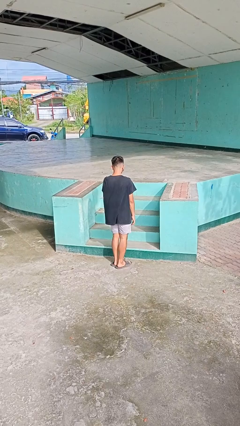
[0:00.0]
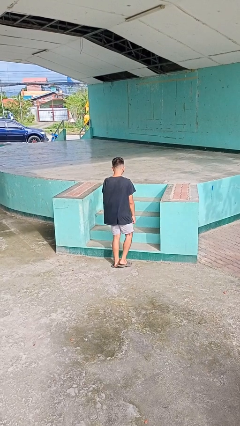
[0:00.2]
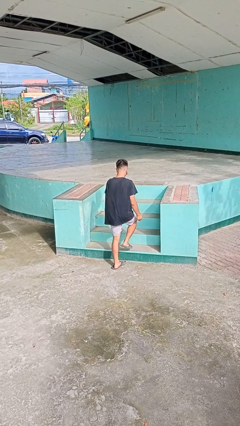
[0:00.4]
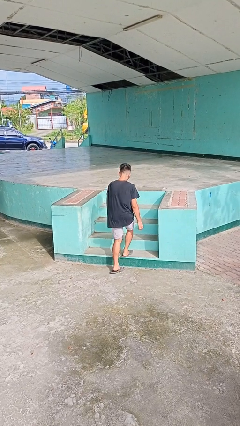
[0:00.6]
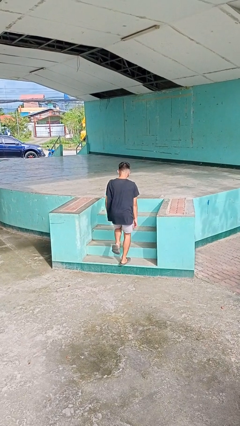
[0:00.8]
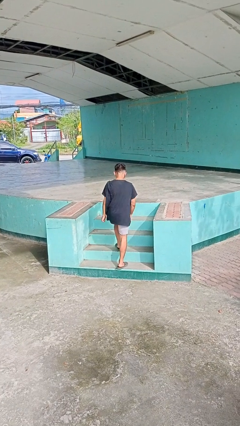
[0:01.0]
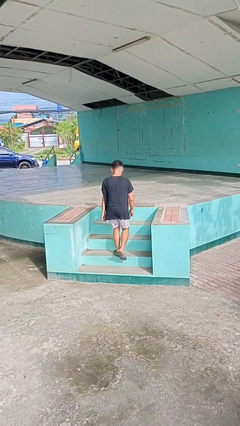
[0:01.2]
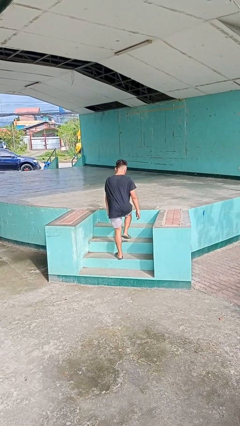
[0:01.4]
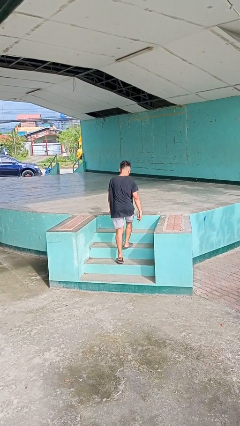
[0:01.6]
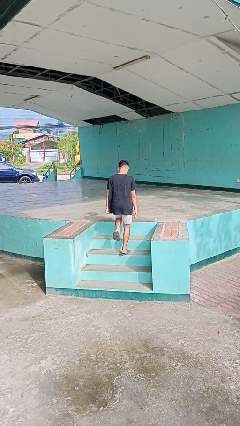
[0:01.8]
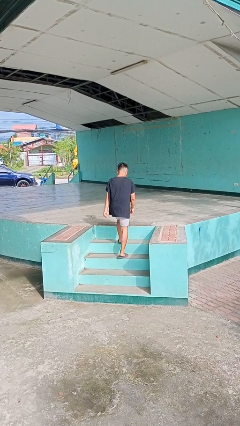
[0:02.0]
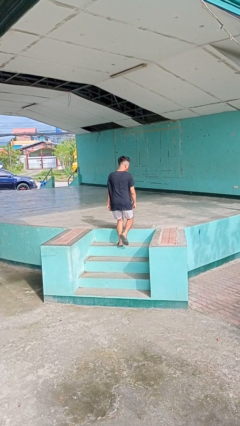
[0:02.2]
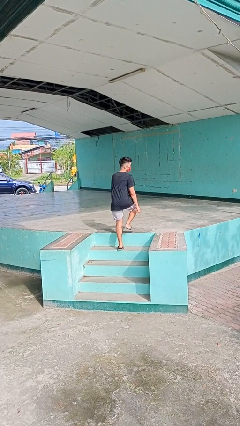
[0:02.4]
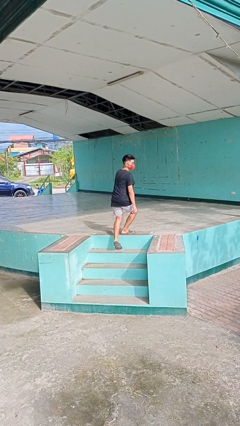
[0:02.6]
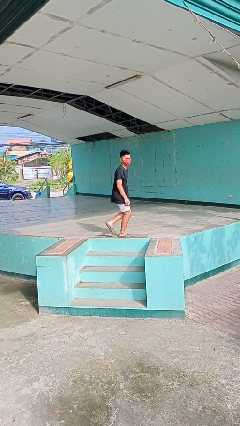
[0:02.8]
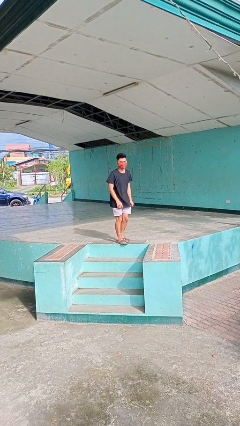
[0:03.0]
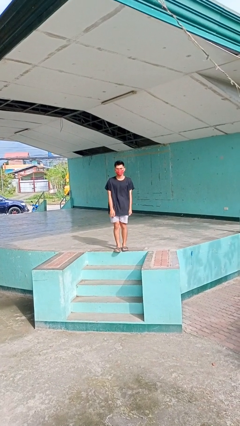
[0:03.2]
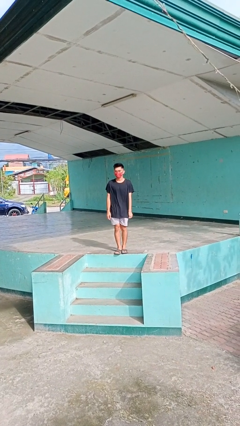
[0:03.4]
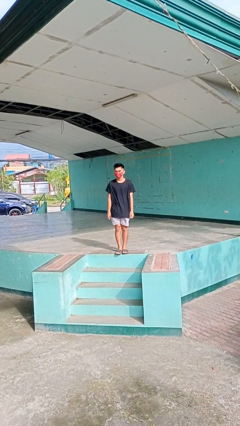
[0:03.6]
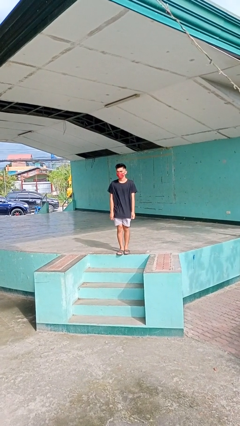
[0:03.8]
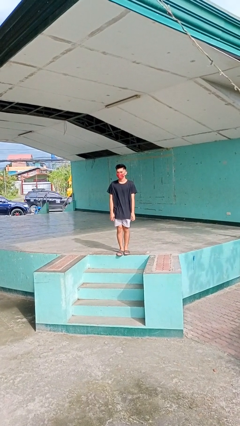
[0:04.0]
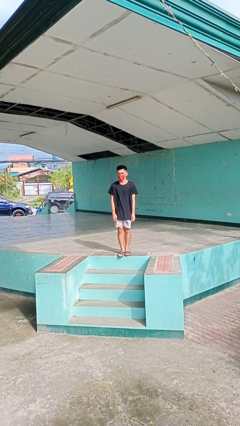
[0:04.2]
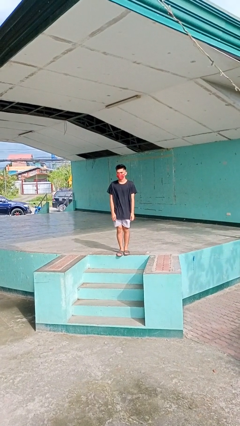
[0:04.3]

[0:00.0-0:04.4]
person climbs up stairs

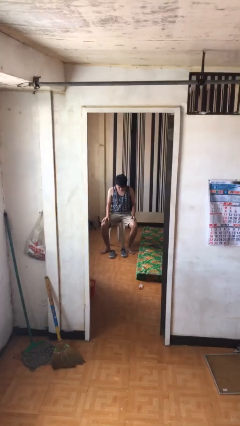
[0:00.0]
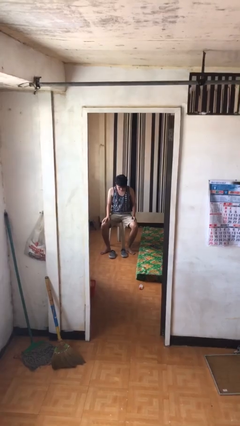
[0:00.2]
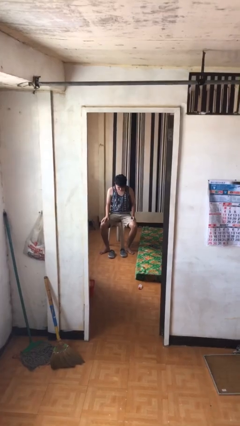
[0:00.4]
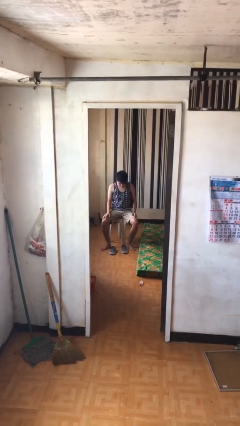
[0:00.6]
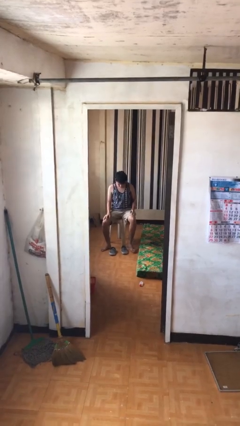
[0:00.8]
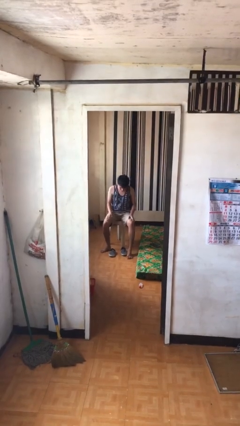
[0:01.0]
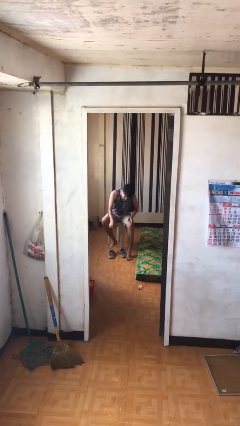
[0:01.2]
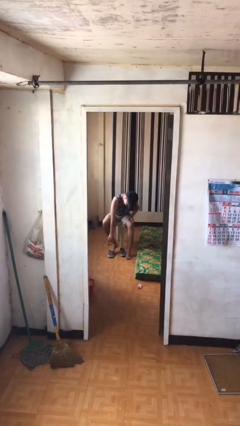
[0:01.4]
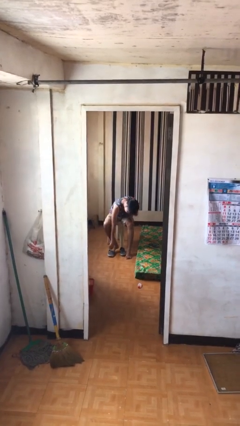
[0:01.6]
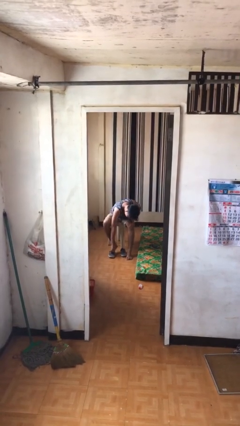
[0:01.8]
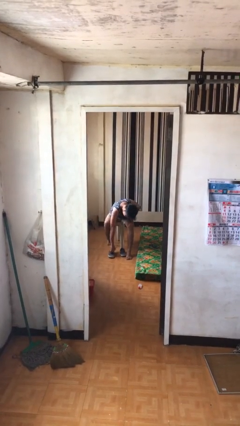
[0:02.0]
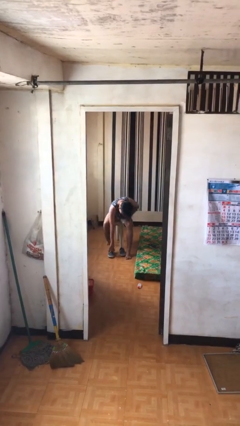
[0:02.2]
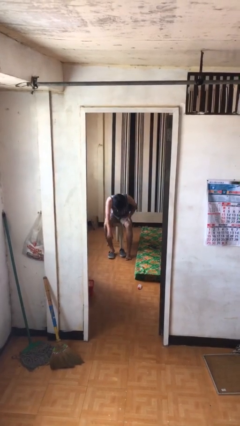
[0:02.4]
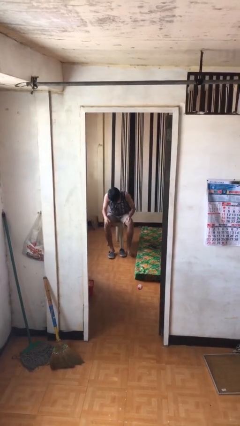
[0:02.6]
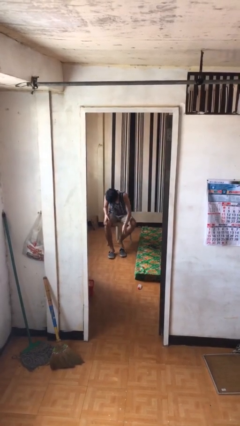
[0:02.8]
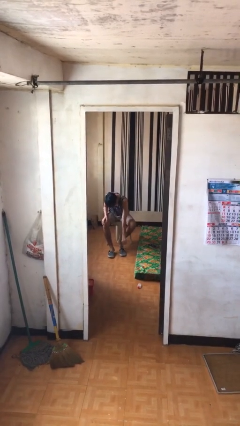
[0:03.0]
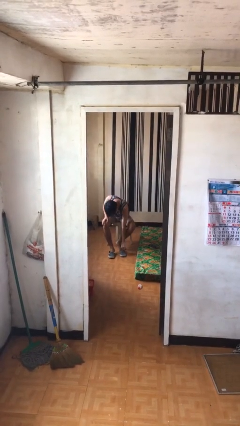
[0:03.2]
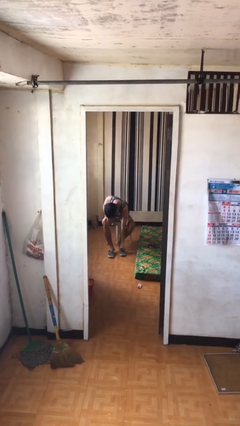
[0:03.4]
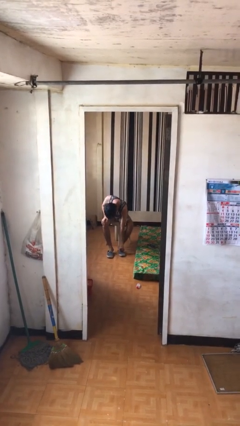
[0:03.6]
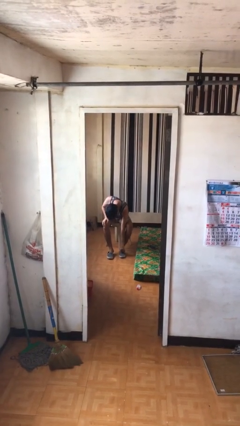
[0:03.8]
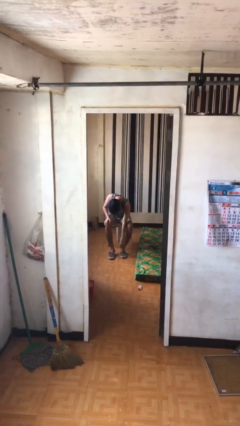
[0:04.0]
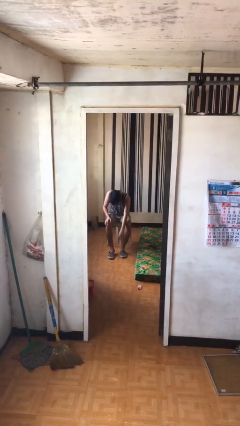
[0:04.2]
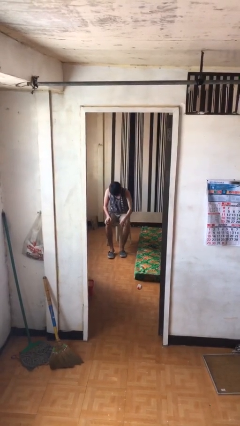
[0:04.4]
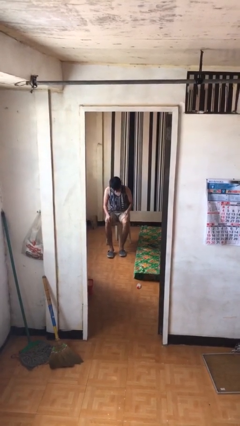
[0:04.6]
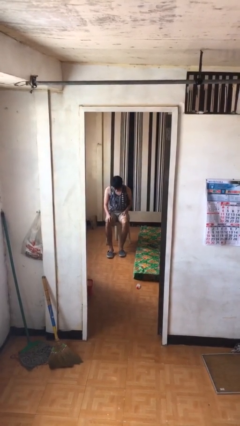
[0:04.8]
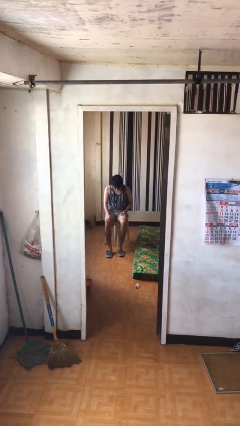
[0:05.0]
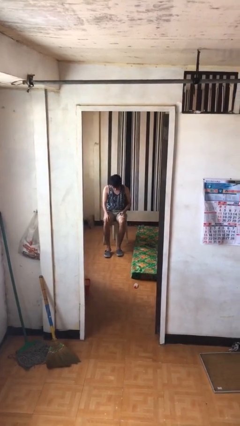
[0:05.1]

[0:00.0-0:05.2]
person puts on shoes

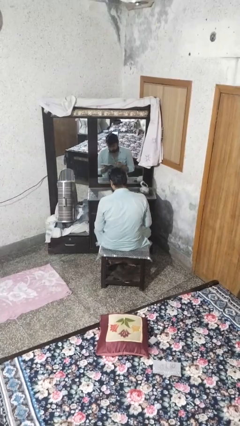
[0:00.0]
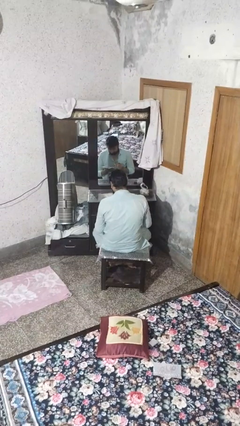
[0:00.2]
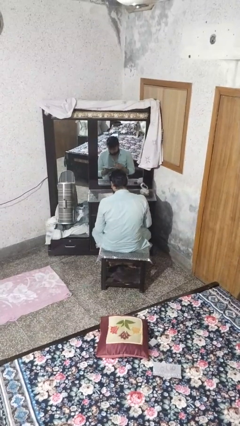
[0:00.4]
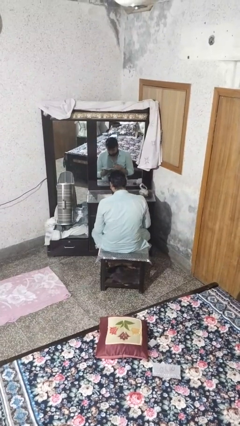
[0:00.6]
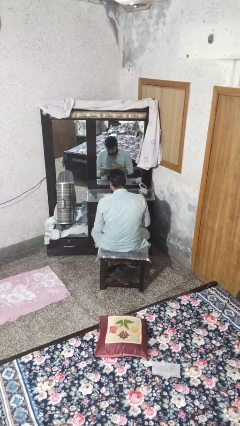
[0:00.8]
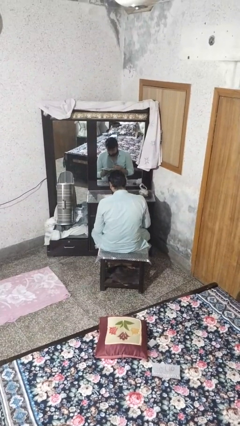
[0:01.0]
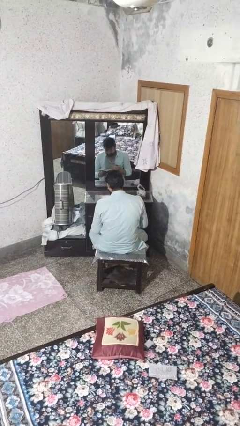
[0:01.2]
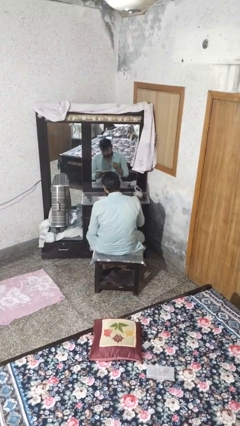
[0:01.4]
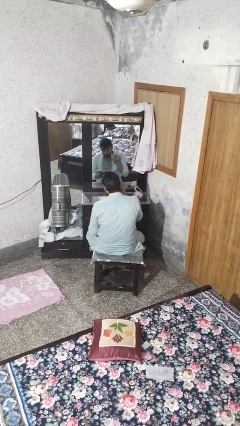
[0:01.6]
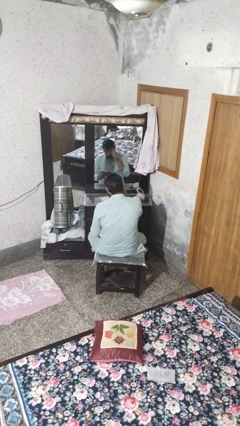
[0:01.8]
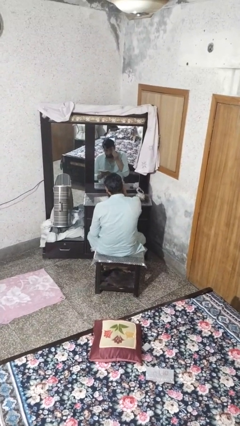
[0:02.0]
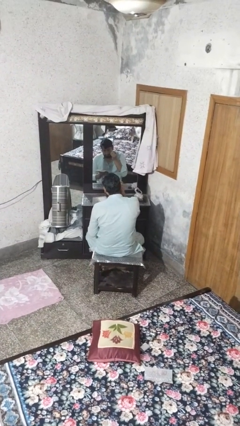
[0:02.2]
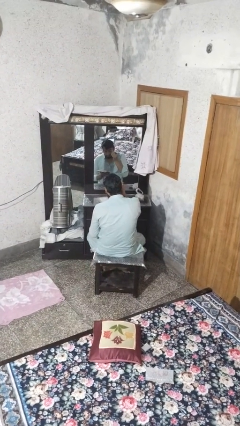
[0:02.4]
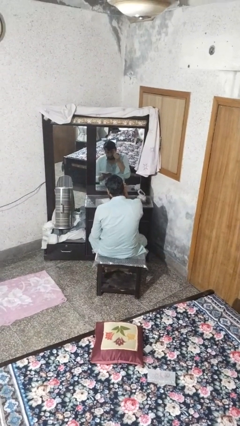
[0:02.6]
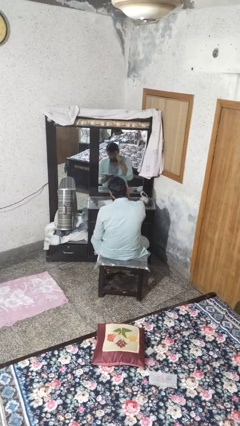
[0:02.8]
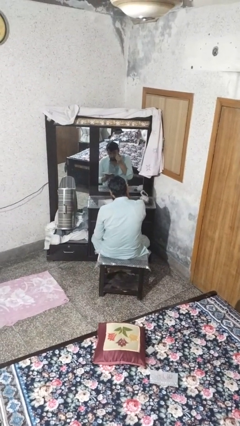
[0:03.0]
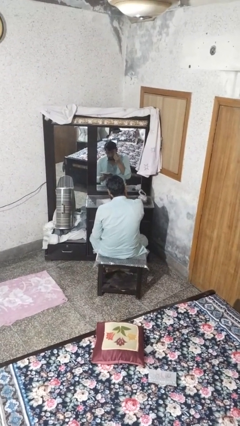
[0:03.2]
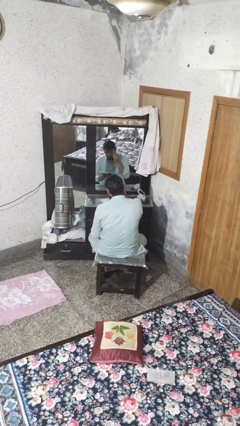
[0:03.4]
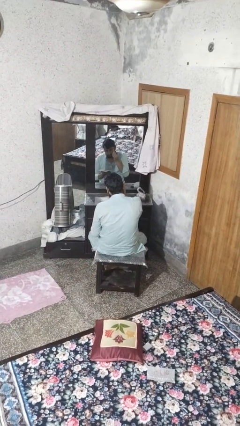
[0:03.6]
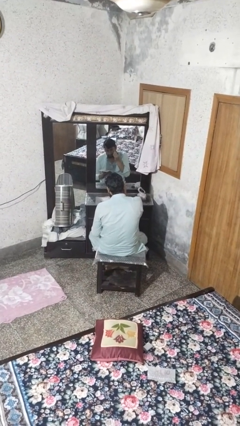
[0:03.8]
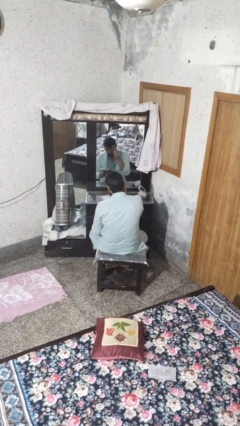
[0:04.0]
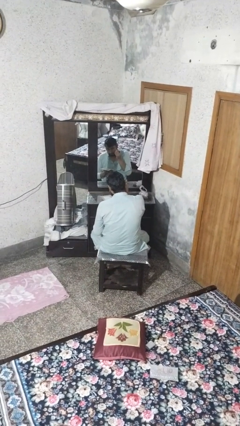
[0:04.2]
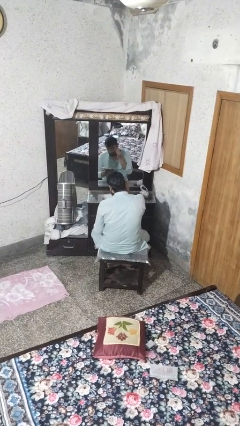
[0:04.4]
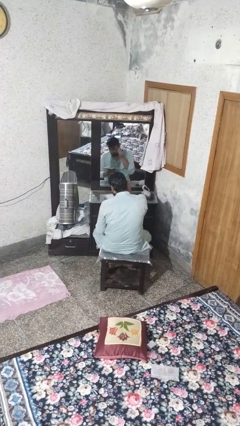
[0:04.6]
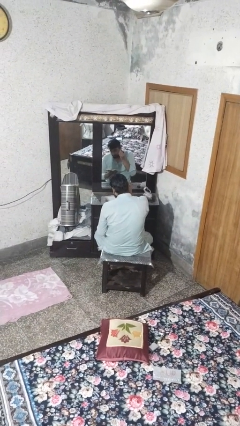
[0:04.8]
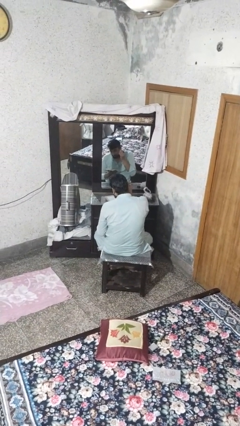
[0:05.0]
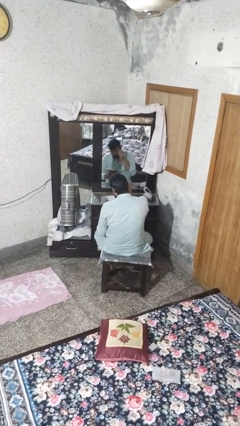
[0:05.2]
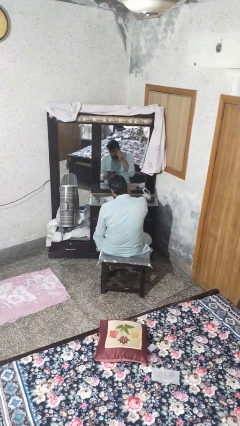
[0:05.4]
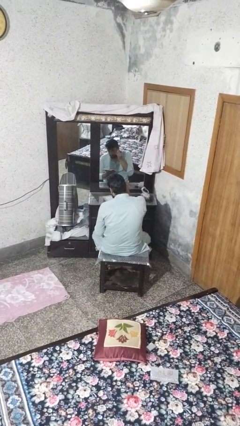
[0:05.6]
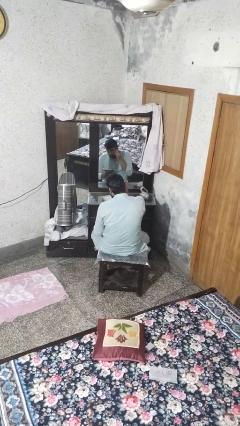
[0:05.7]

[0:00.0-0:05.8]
person applies eye makeup

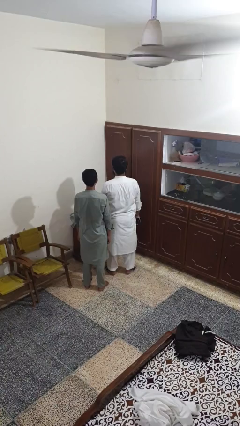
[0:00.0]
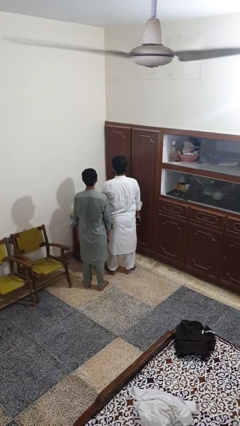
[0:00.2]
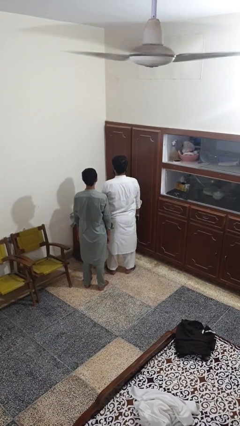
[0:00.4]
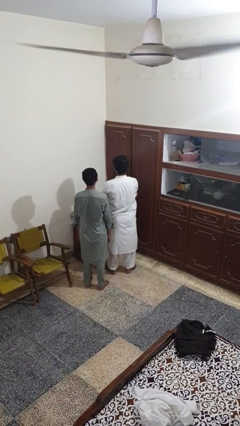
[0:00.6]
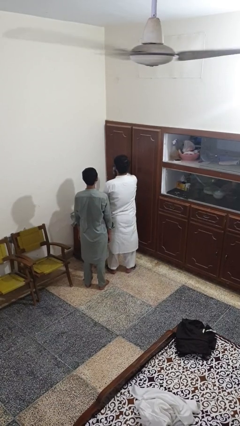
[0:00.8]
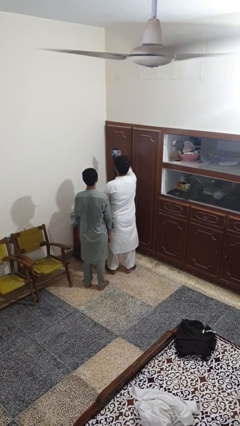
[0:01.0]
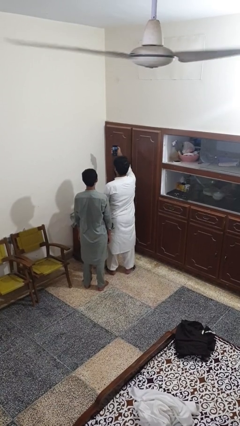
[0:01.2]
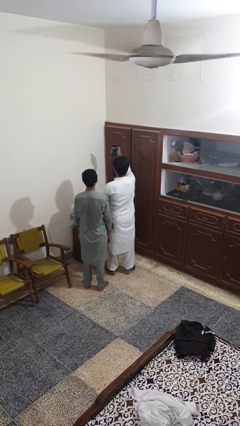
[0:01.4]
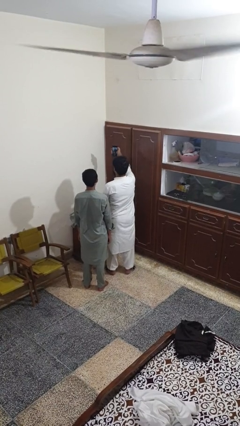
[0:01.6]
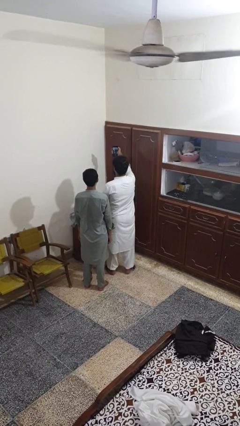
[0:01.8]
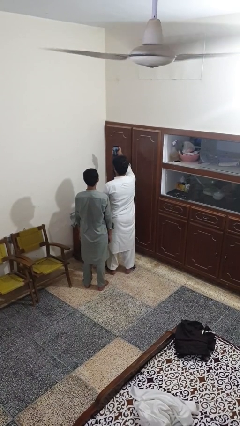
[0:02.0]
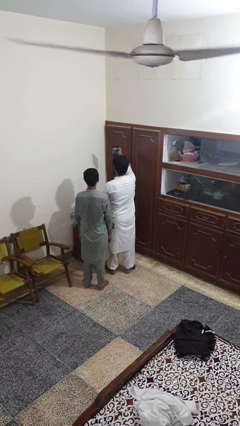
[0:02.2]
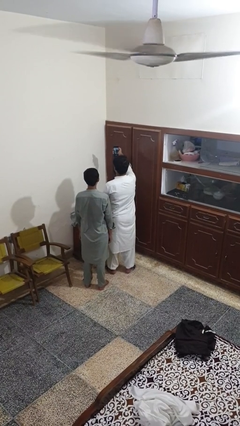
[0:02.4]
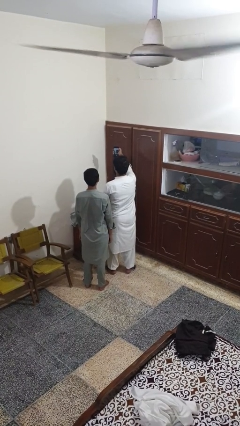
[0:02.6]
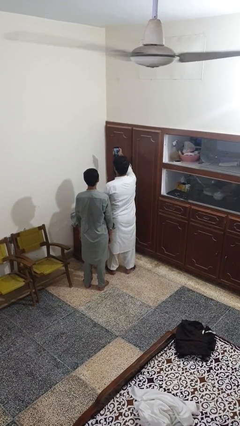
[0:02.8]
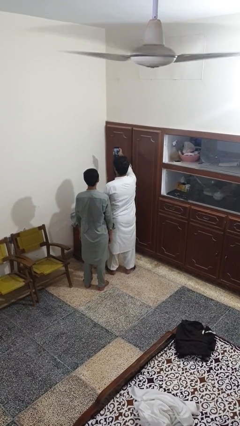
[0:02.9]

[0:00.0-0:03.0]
person takes selfie with person
